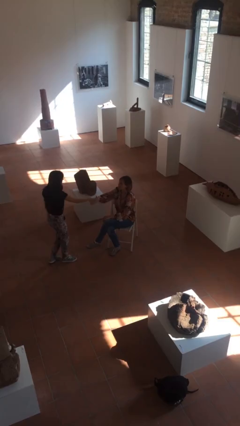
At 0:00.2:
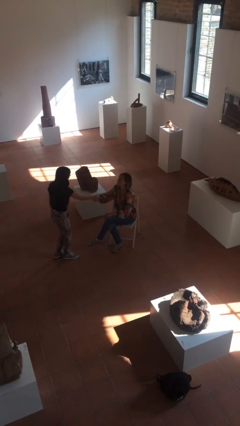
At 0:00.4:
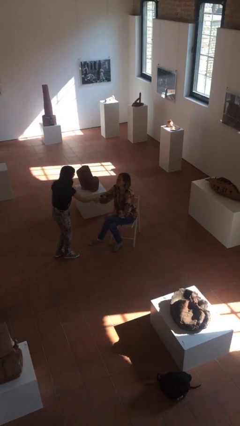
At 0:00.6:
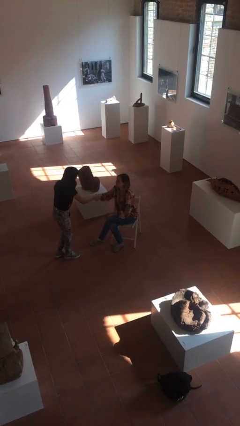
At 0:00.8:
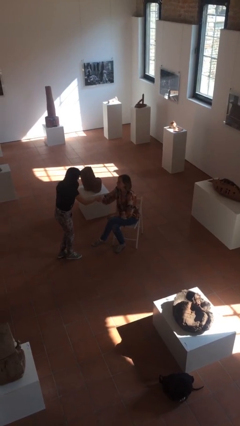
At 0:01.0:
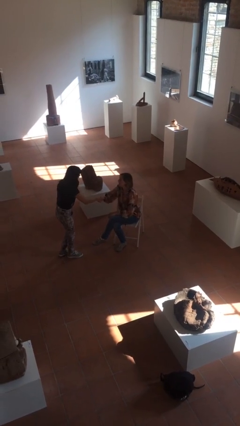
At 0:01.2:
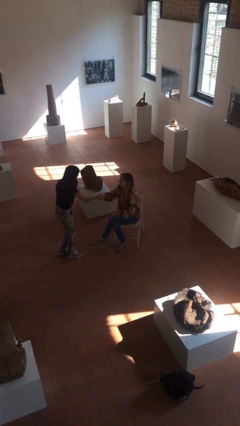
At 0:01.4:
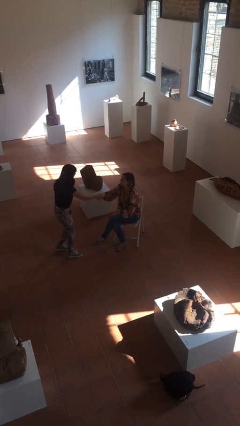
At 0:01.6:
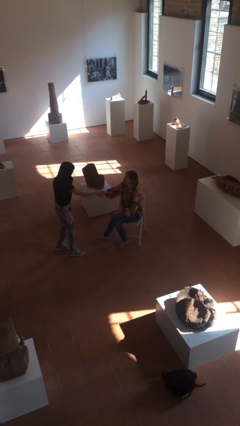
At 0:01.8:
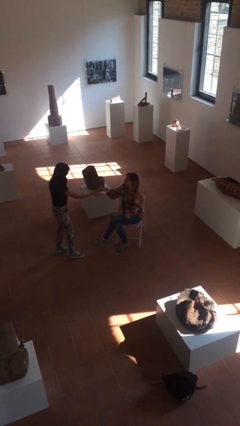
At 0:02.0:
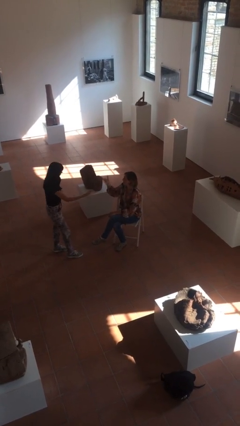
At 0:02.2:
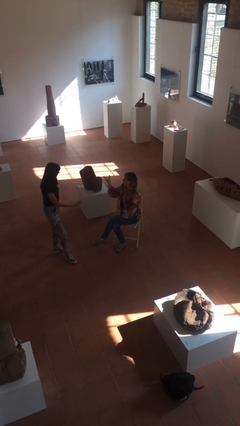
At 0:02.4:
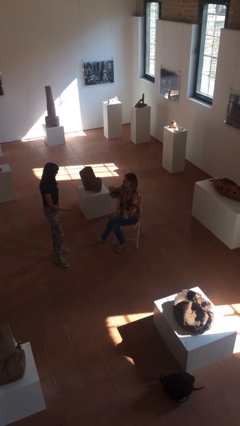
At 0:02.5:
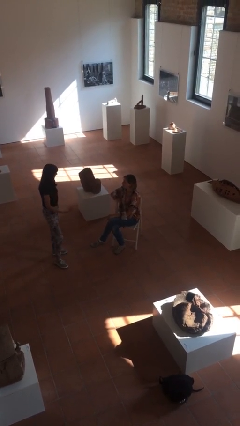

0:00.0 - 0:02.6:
person shakes hand

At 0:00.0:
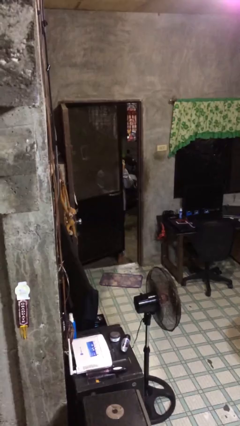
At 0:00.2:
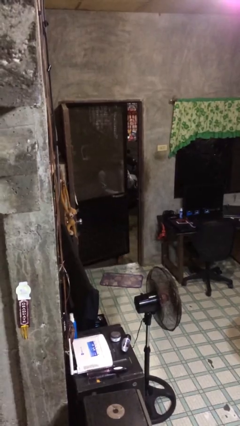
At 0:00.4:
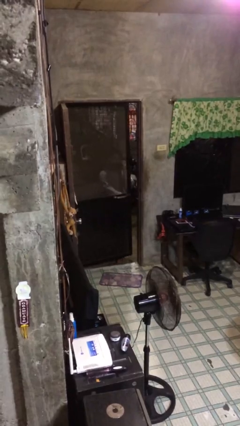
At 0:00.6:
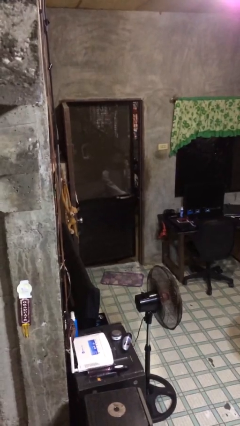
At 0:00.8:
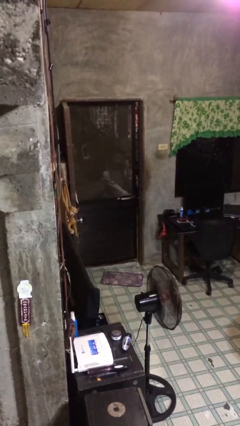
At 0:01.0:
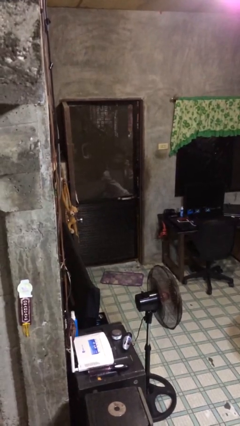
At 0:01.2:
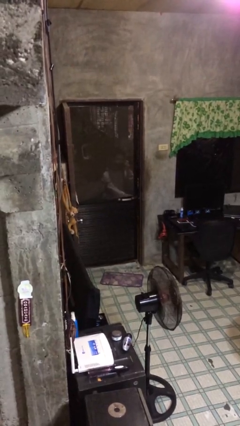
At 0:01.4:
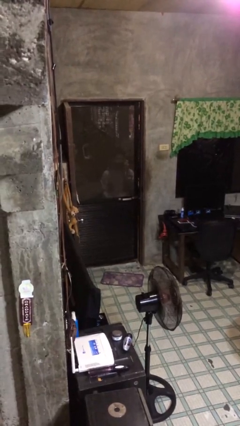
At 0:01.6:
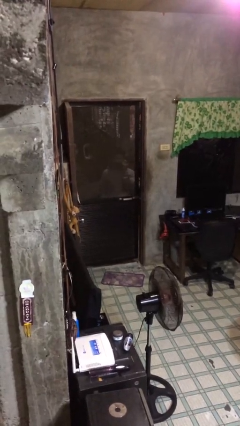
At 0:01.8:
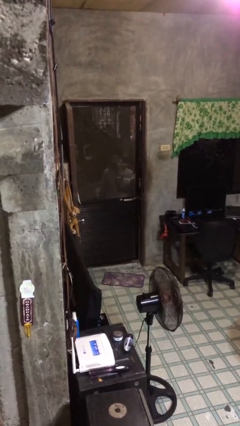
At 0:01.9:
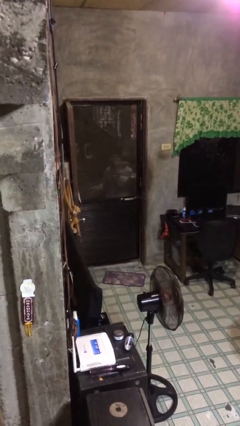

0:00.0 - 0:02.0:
person closes facility door

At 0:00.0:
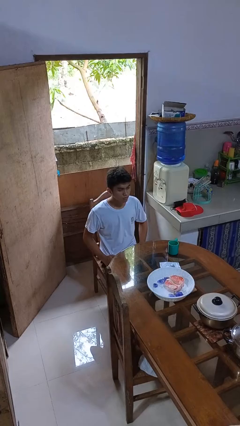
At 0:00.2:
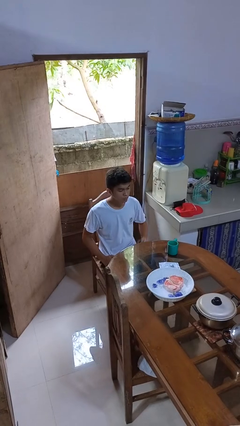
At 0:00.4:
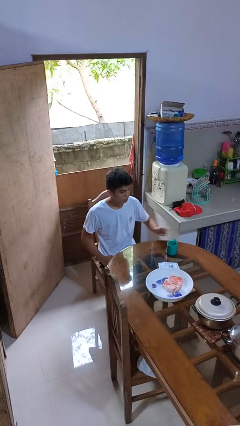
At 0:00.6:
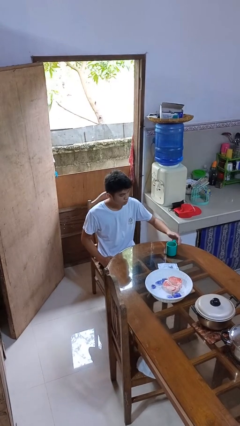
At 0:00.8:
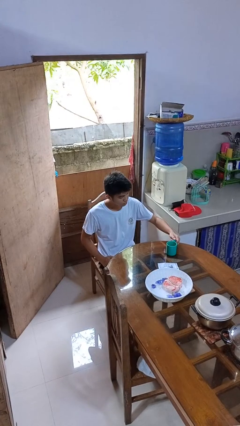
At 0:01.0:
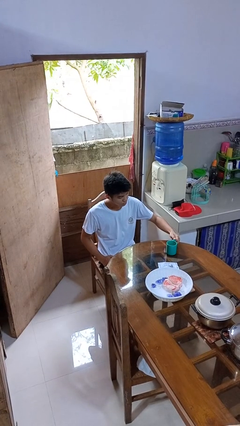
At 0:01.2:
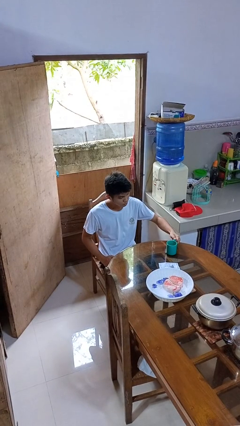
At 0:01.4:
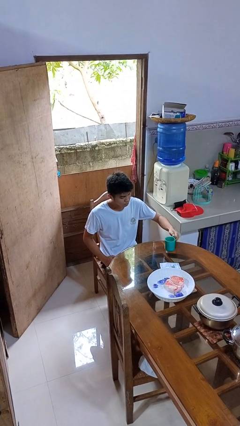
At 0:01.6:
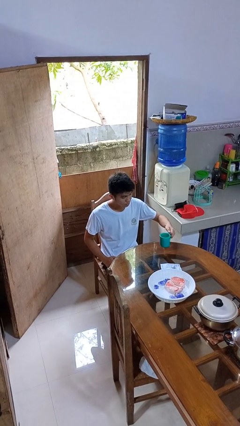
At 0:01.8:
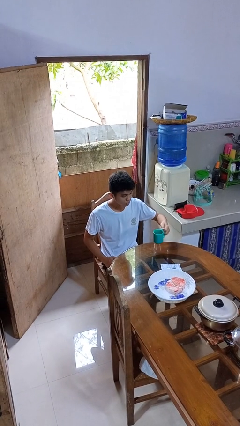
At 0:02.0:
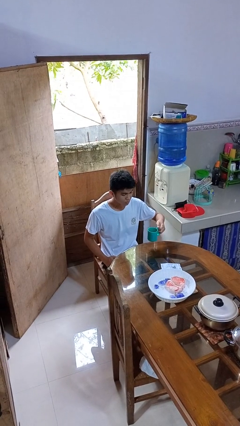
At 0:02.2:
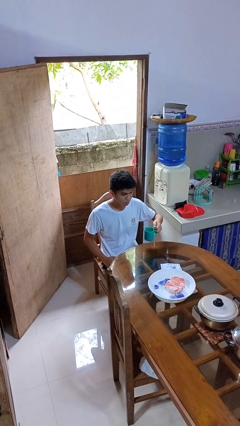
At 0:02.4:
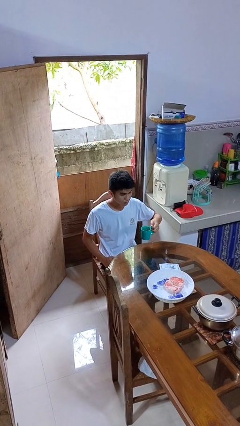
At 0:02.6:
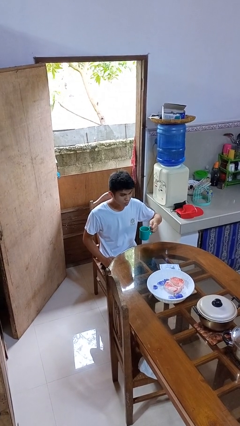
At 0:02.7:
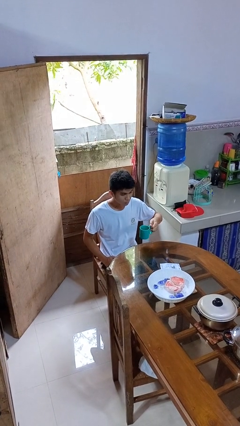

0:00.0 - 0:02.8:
person picks up object from table

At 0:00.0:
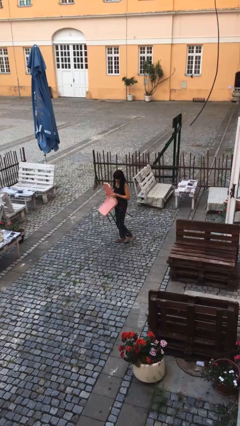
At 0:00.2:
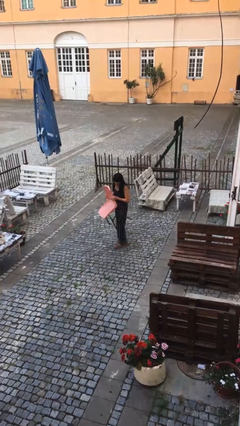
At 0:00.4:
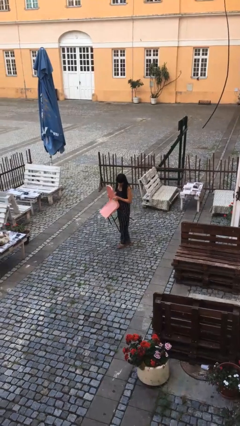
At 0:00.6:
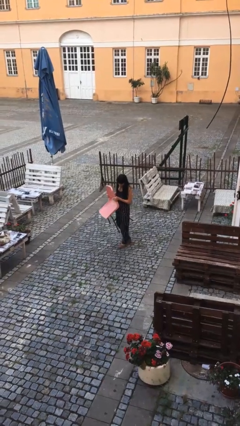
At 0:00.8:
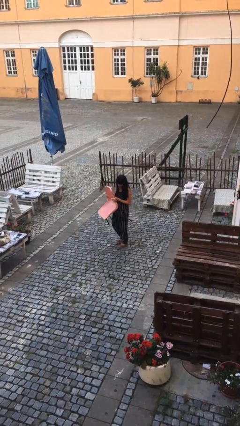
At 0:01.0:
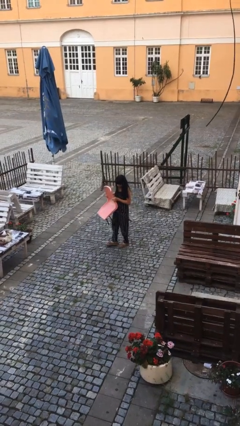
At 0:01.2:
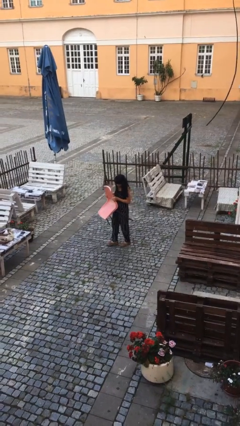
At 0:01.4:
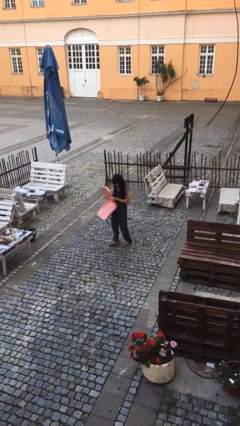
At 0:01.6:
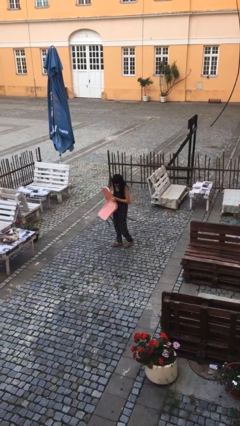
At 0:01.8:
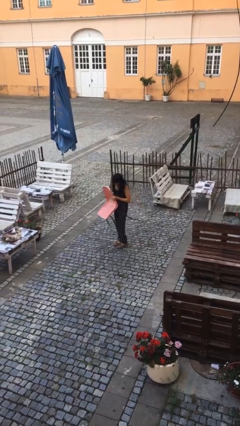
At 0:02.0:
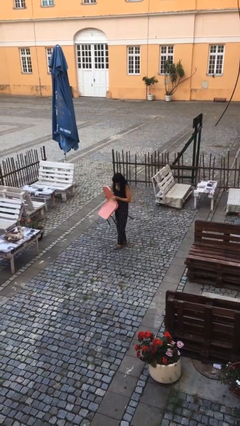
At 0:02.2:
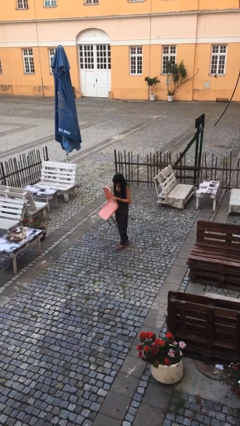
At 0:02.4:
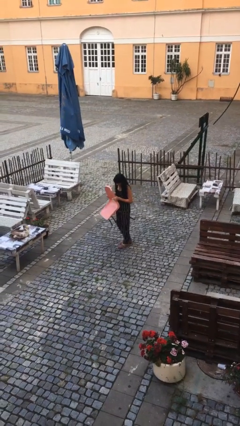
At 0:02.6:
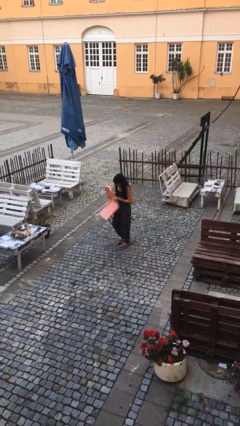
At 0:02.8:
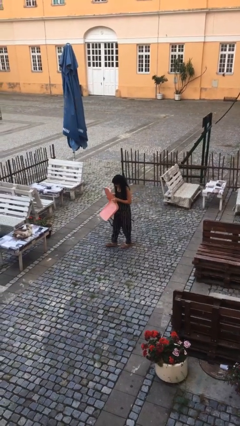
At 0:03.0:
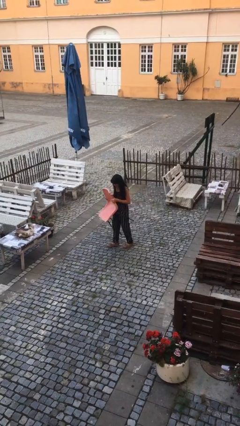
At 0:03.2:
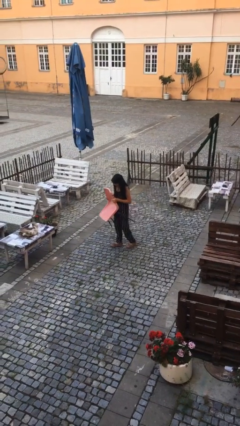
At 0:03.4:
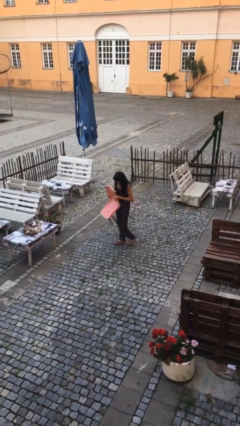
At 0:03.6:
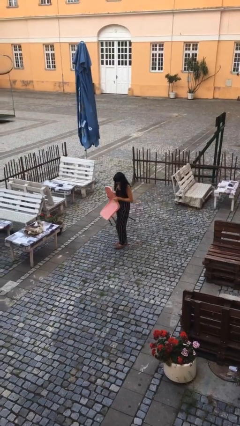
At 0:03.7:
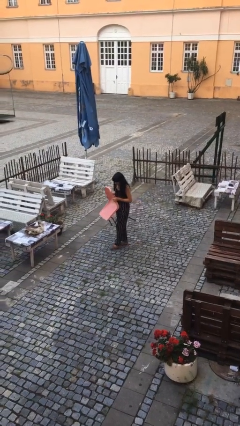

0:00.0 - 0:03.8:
person carries heavy object

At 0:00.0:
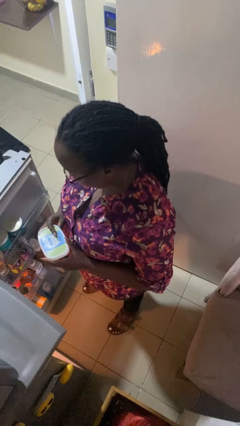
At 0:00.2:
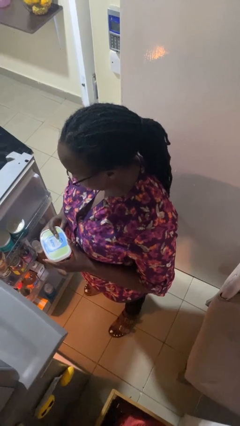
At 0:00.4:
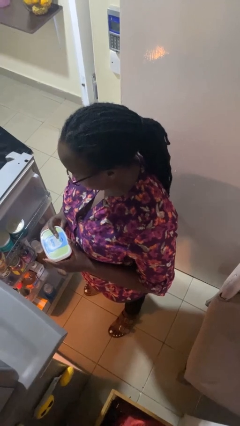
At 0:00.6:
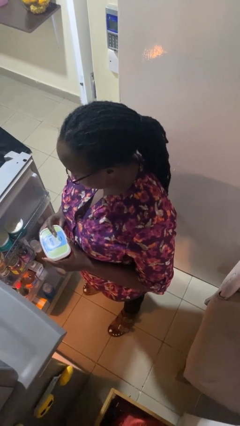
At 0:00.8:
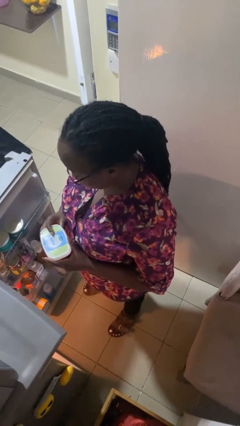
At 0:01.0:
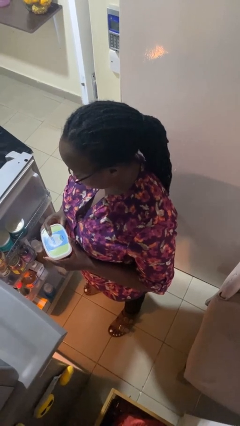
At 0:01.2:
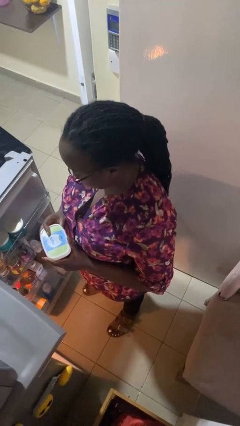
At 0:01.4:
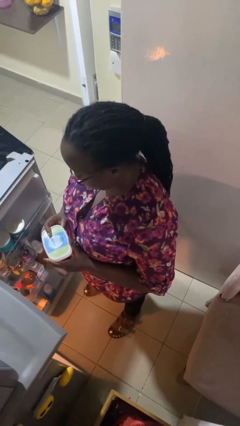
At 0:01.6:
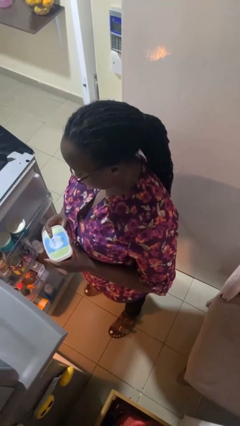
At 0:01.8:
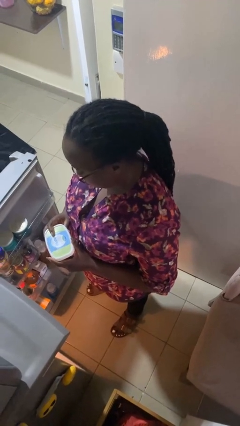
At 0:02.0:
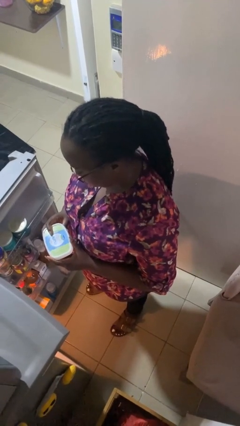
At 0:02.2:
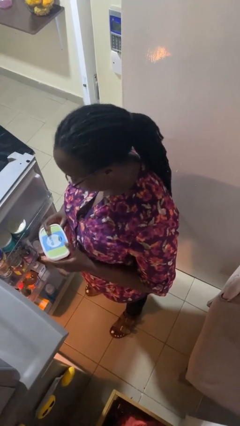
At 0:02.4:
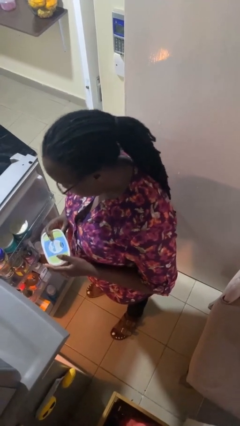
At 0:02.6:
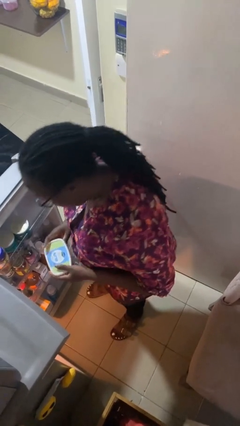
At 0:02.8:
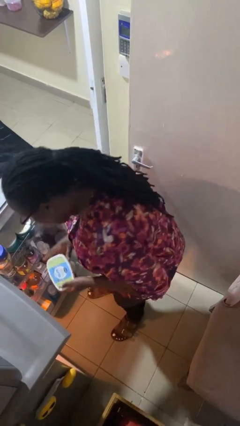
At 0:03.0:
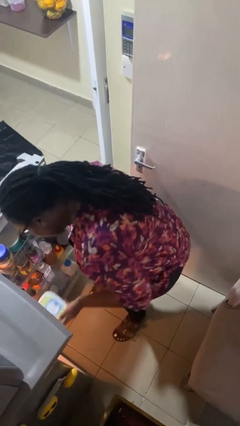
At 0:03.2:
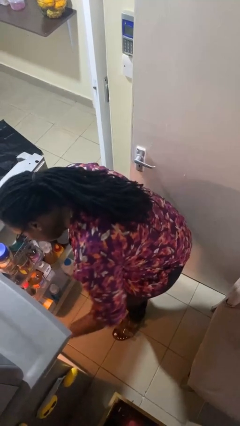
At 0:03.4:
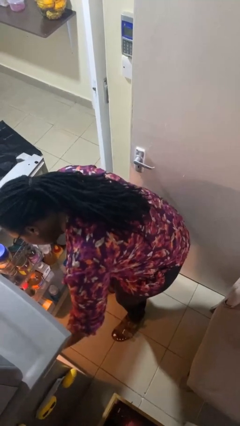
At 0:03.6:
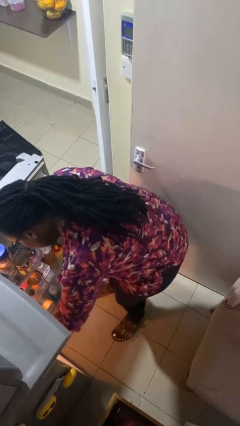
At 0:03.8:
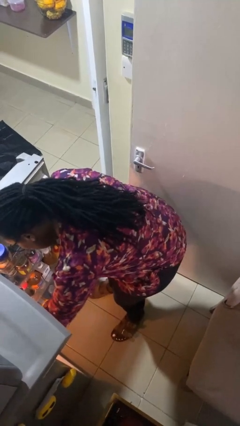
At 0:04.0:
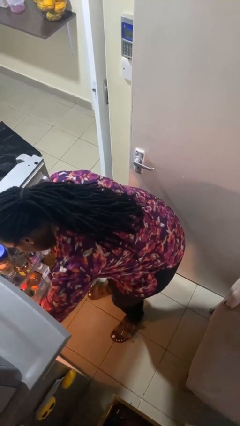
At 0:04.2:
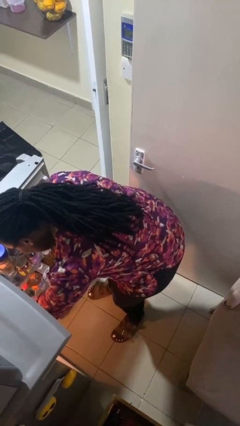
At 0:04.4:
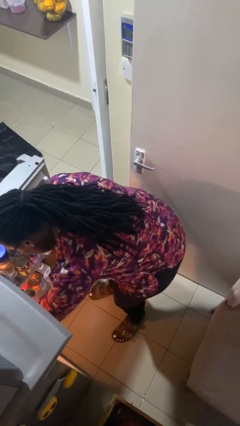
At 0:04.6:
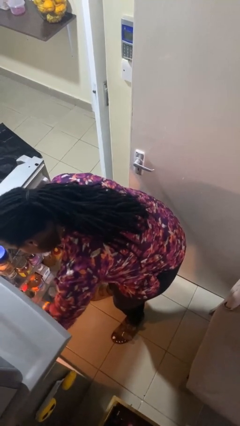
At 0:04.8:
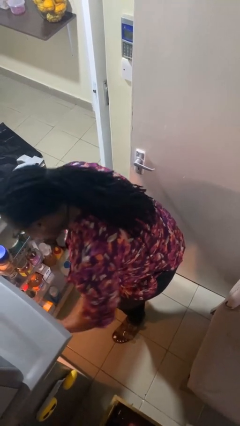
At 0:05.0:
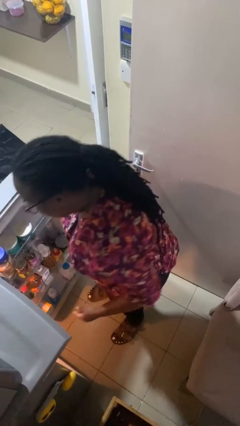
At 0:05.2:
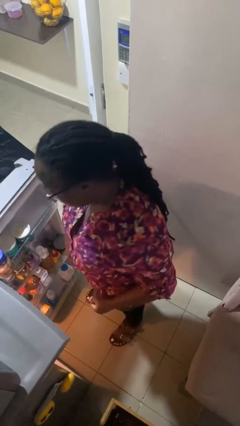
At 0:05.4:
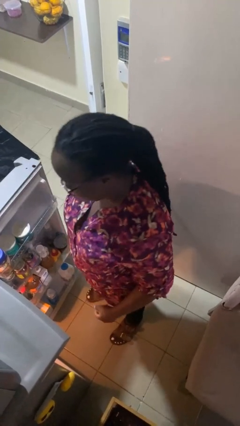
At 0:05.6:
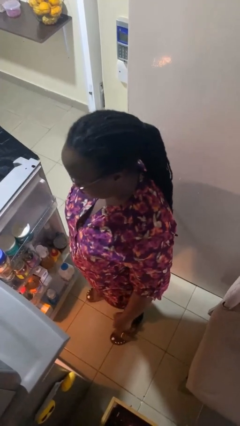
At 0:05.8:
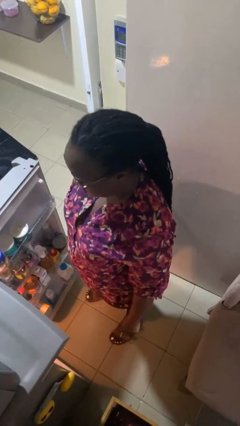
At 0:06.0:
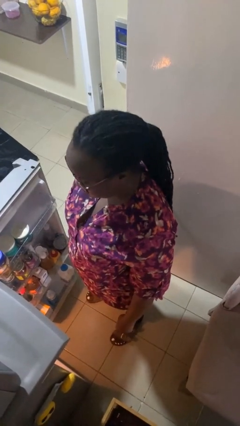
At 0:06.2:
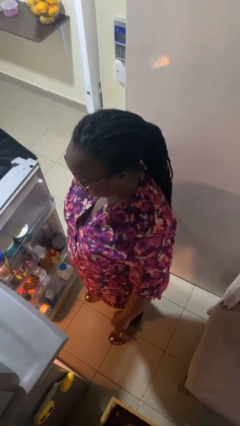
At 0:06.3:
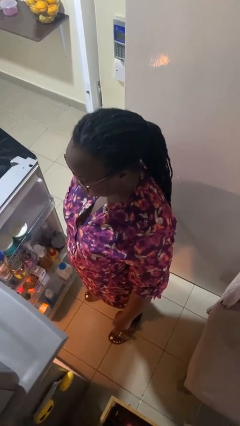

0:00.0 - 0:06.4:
person puts object into refrigerator
